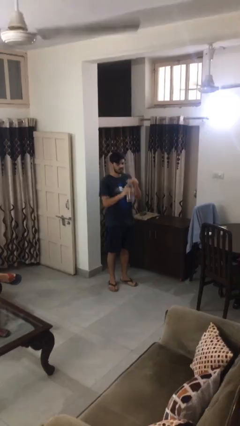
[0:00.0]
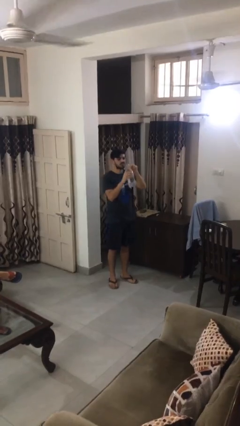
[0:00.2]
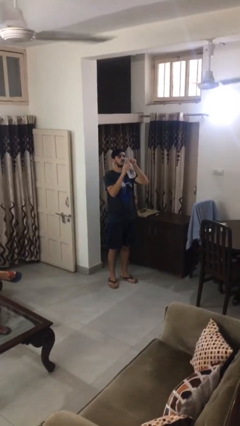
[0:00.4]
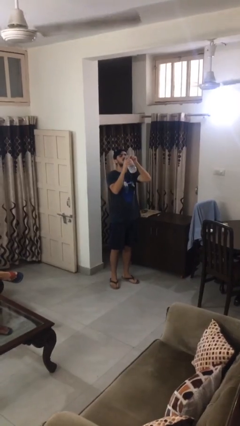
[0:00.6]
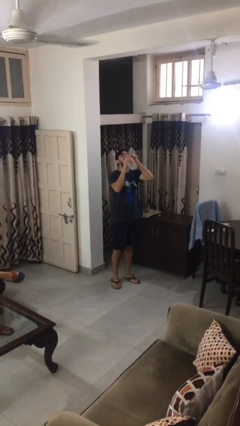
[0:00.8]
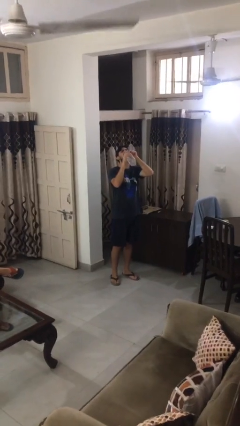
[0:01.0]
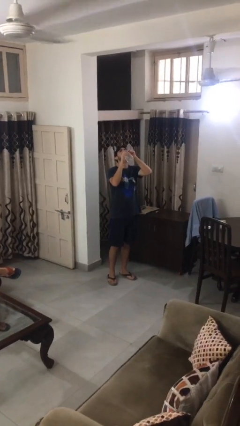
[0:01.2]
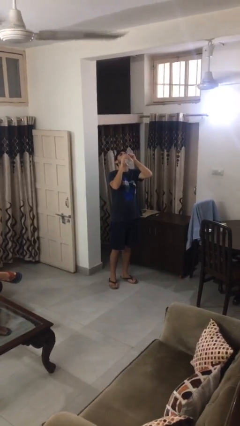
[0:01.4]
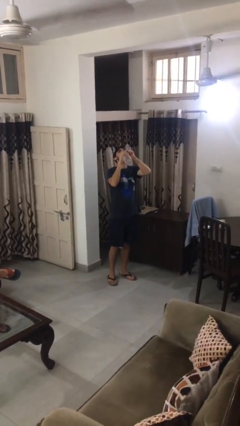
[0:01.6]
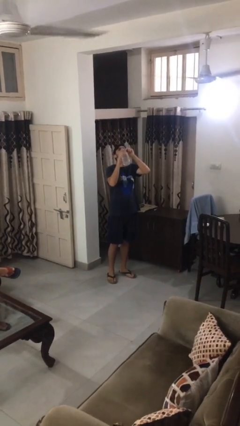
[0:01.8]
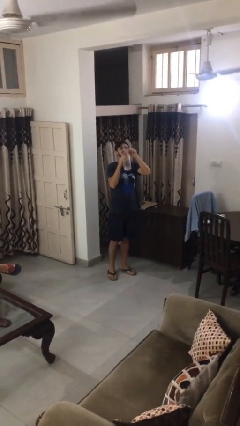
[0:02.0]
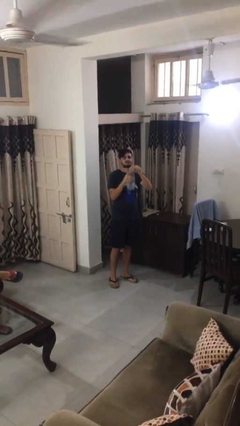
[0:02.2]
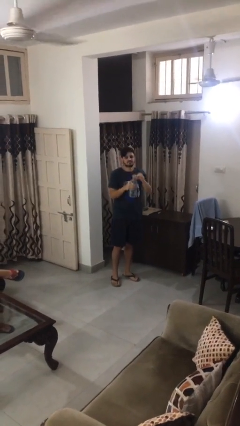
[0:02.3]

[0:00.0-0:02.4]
person drinks from bottle

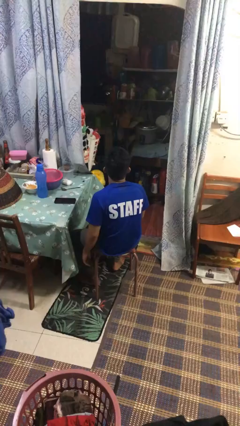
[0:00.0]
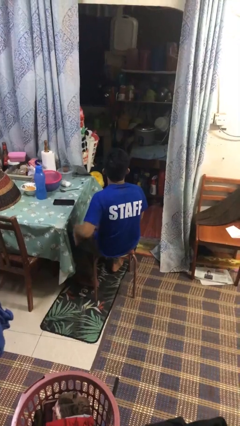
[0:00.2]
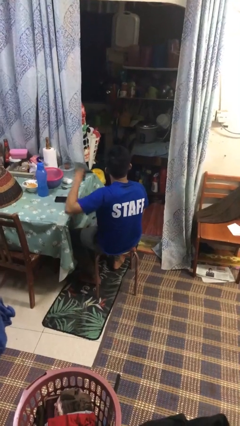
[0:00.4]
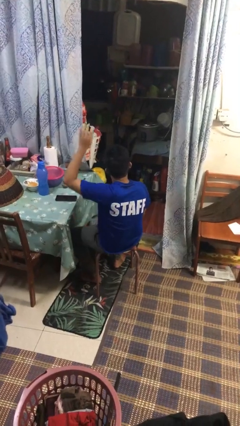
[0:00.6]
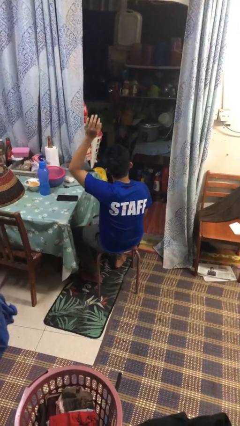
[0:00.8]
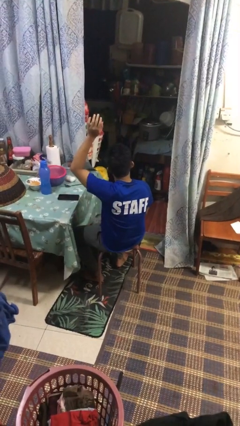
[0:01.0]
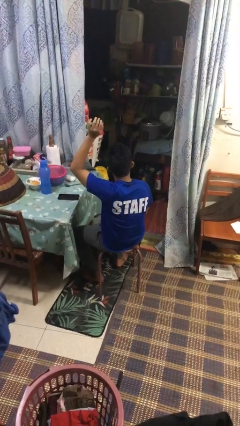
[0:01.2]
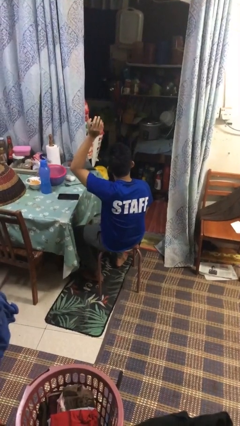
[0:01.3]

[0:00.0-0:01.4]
person gestures raise hand

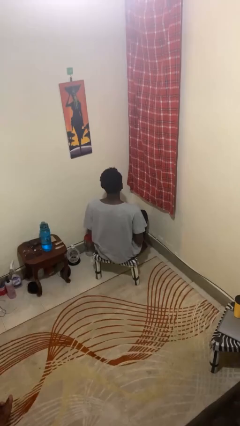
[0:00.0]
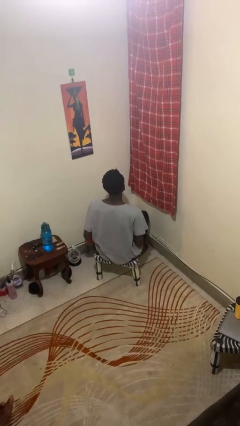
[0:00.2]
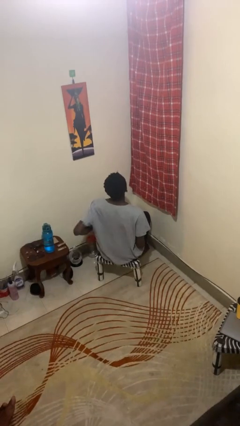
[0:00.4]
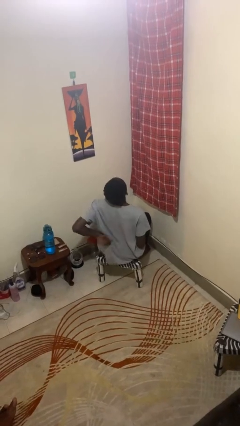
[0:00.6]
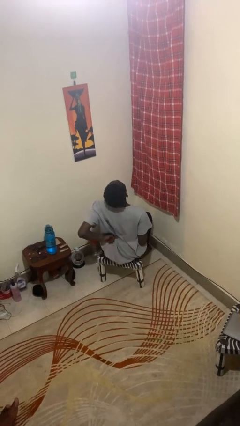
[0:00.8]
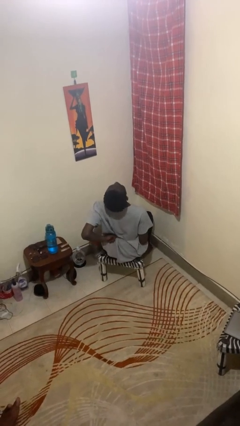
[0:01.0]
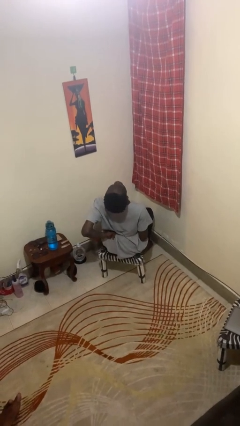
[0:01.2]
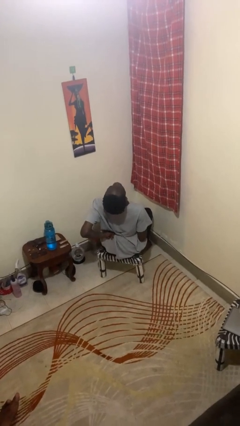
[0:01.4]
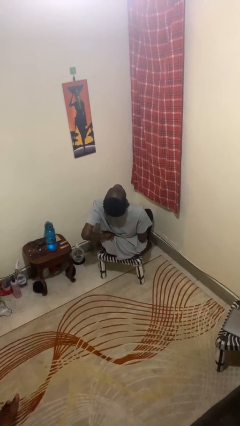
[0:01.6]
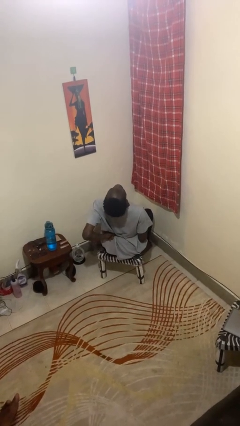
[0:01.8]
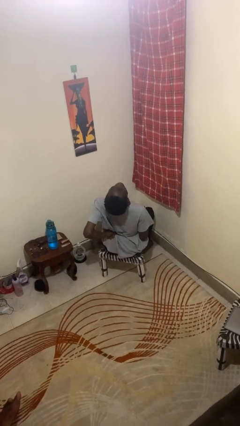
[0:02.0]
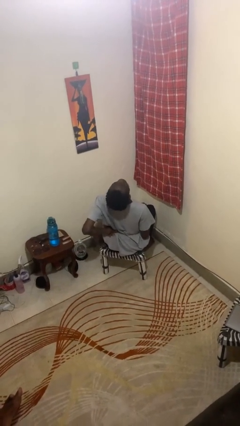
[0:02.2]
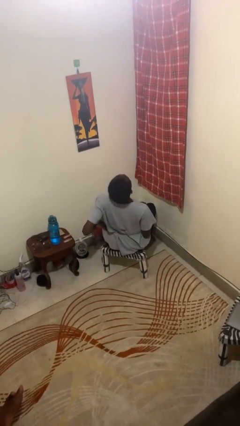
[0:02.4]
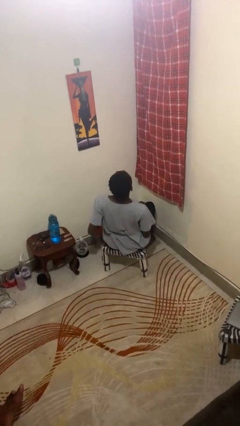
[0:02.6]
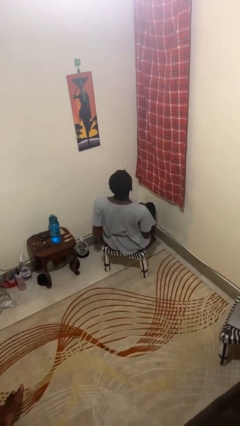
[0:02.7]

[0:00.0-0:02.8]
person stretches back

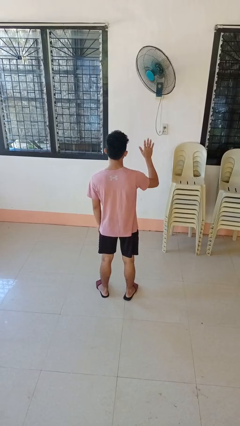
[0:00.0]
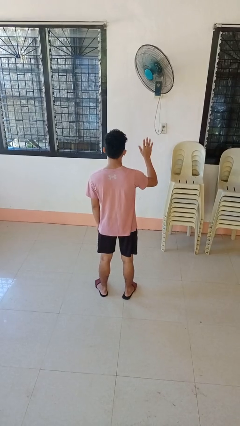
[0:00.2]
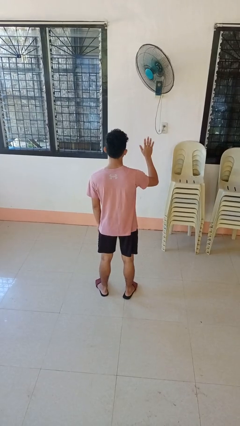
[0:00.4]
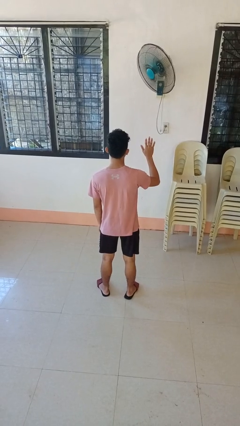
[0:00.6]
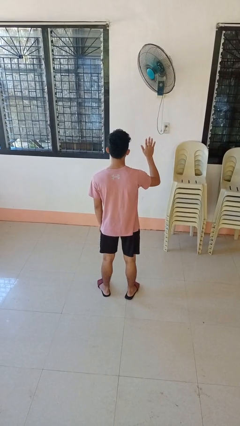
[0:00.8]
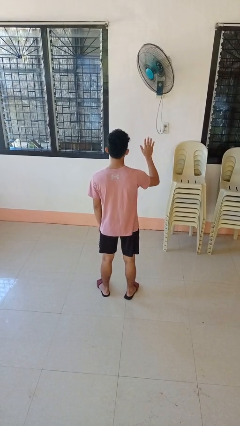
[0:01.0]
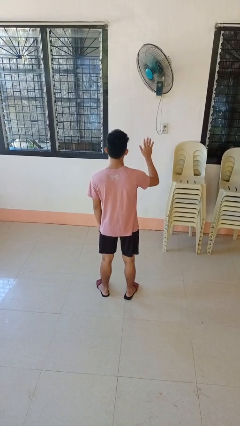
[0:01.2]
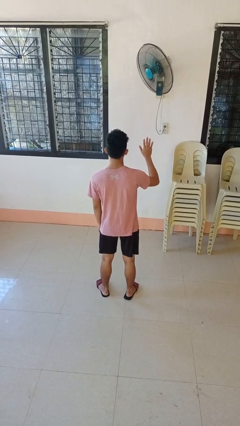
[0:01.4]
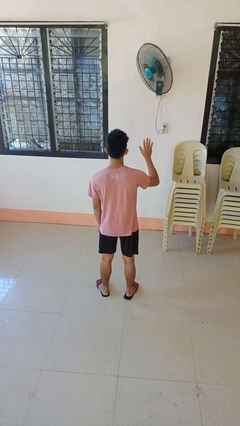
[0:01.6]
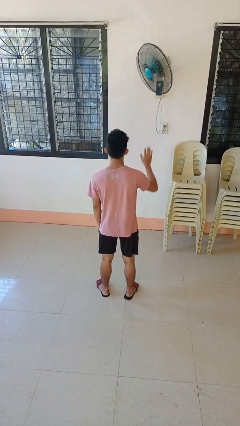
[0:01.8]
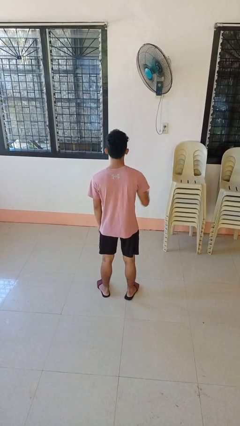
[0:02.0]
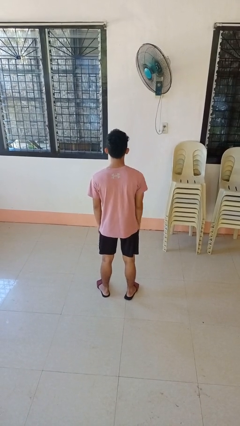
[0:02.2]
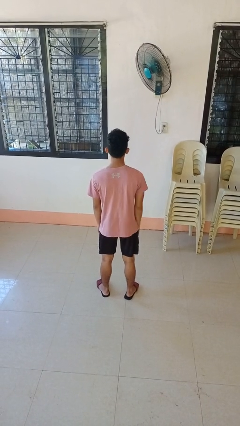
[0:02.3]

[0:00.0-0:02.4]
person gestures number five

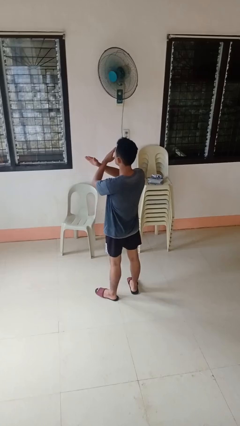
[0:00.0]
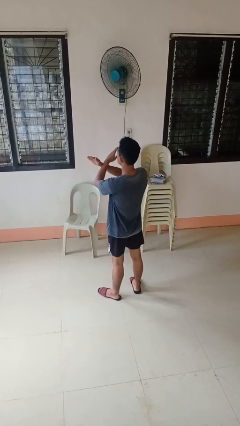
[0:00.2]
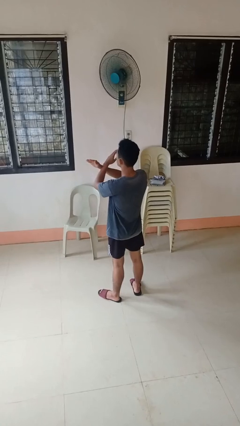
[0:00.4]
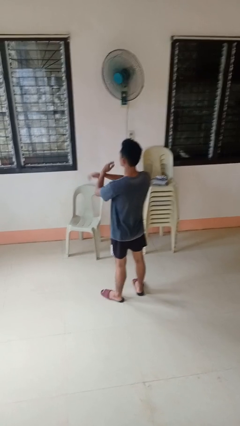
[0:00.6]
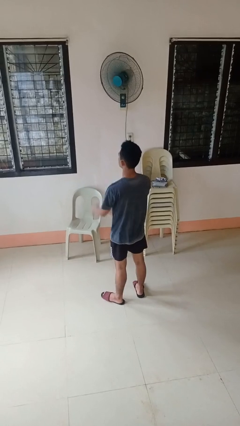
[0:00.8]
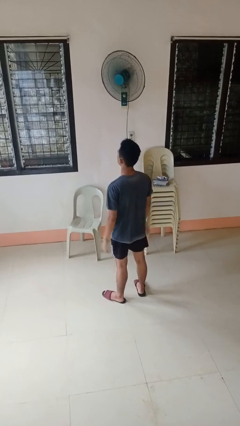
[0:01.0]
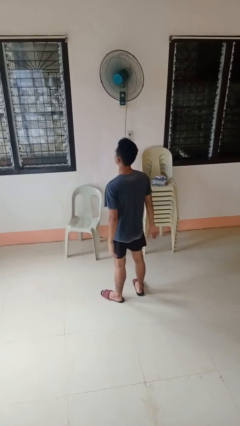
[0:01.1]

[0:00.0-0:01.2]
person gestures arms x

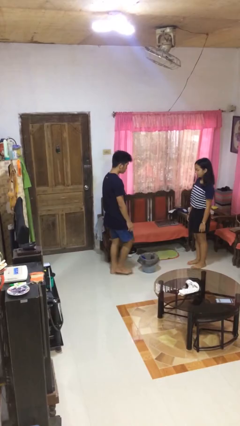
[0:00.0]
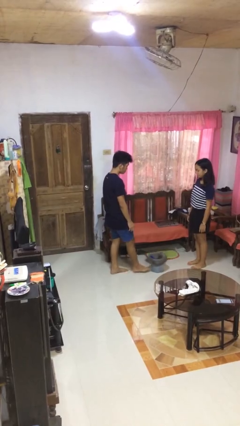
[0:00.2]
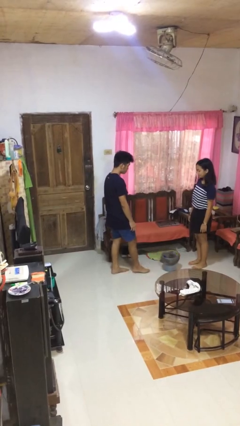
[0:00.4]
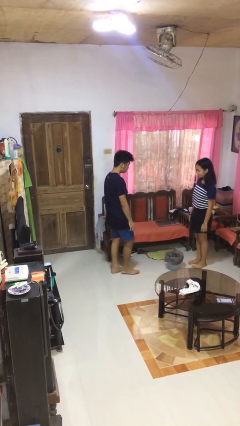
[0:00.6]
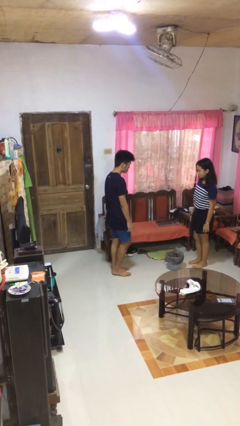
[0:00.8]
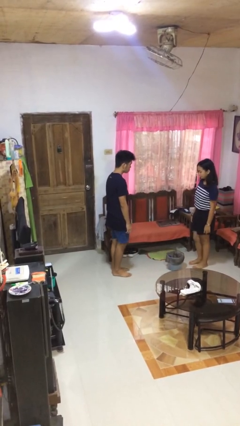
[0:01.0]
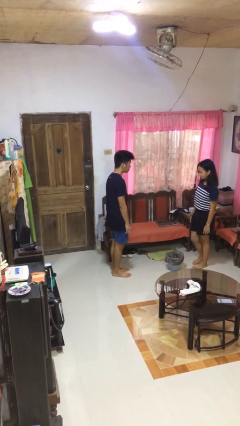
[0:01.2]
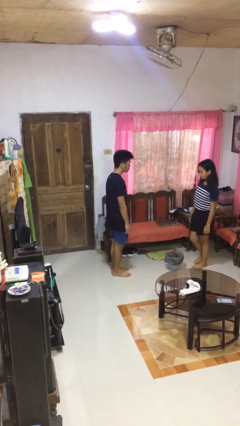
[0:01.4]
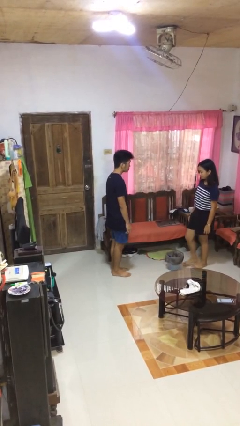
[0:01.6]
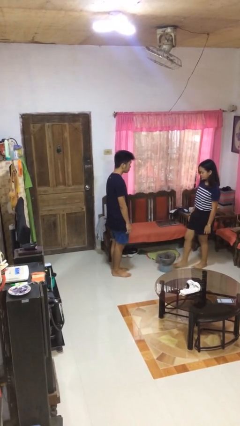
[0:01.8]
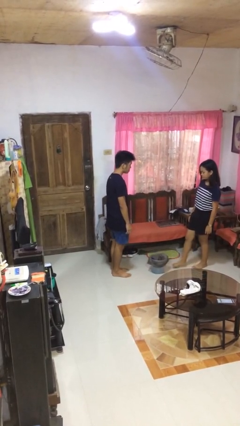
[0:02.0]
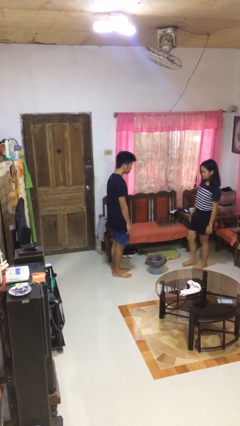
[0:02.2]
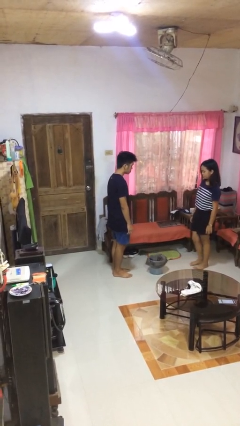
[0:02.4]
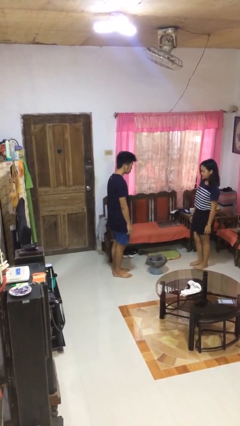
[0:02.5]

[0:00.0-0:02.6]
person kicks object to person

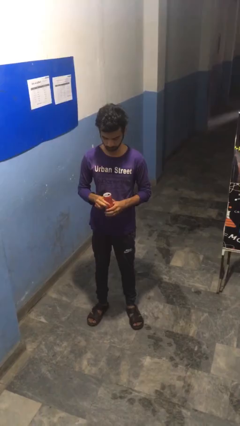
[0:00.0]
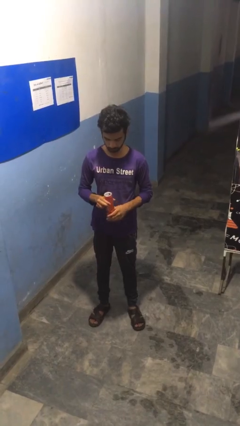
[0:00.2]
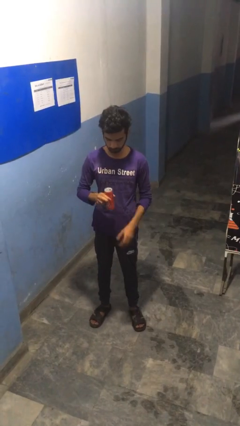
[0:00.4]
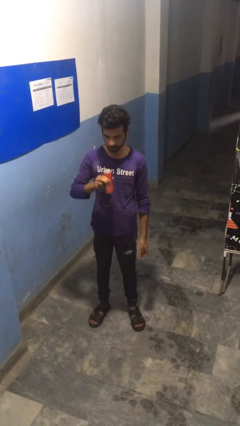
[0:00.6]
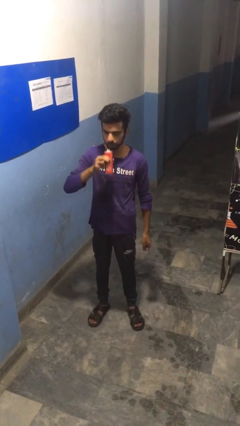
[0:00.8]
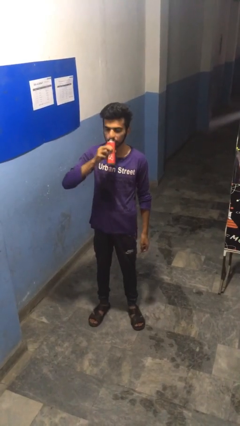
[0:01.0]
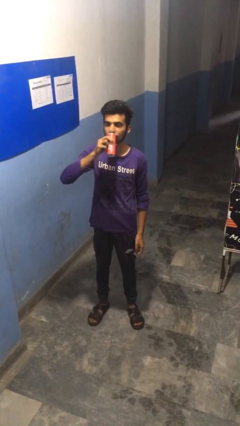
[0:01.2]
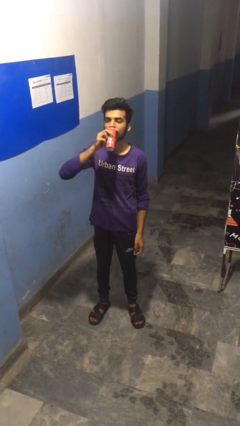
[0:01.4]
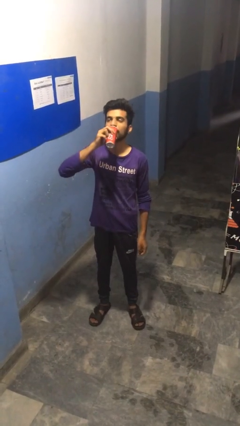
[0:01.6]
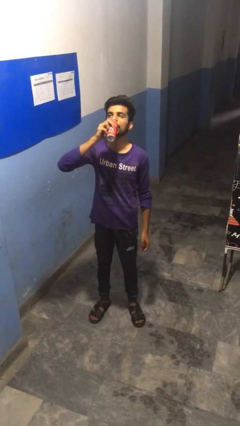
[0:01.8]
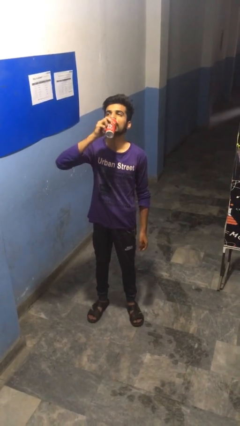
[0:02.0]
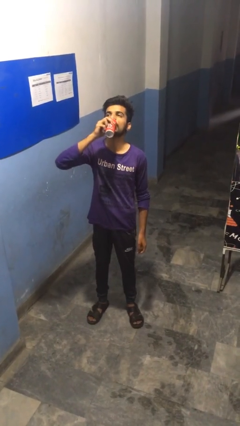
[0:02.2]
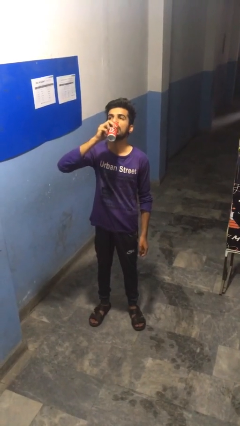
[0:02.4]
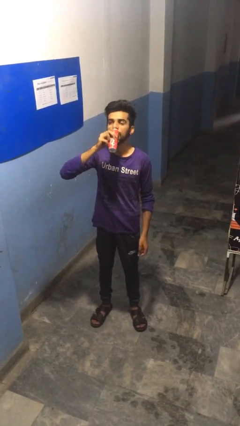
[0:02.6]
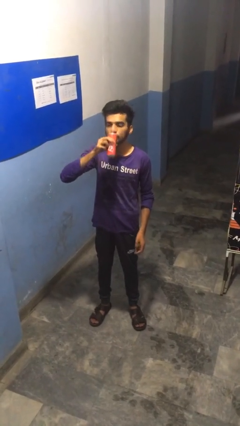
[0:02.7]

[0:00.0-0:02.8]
person drinks from beverage can

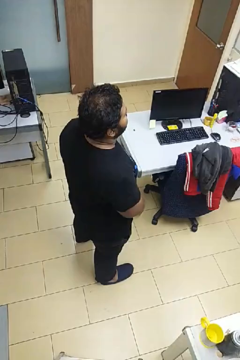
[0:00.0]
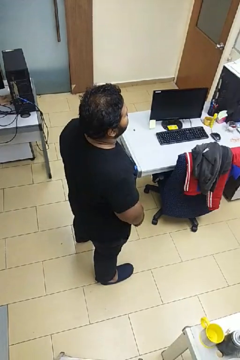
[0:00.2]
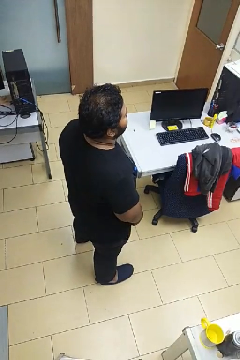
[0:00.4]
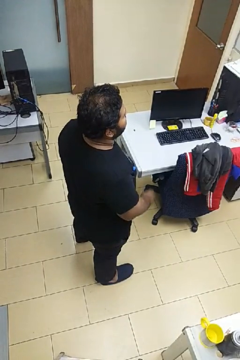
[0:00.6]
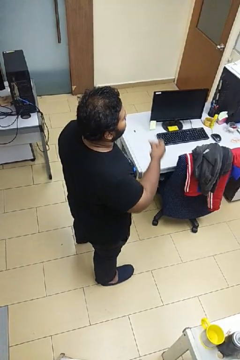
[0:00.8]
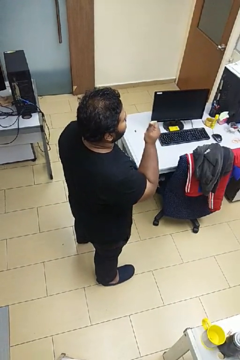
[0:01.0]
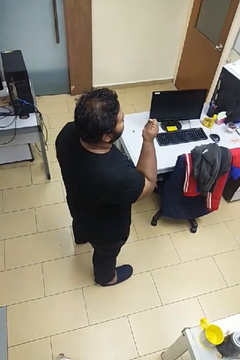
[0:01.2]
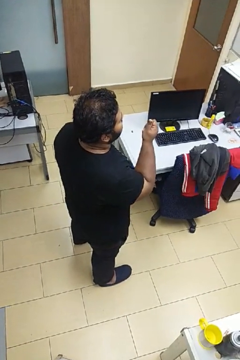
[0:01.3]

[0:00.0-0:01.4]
person snaps fingers

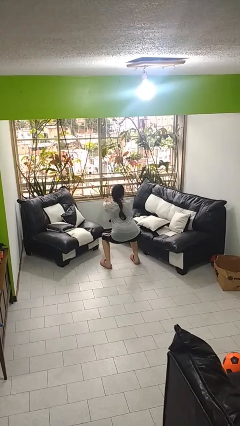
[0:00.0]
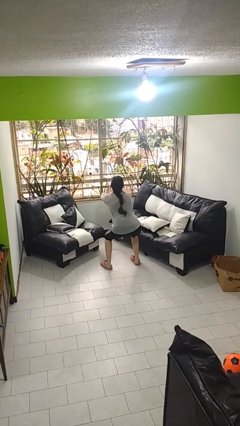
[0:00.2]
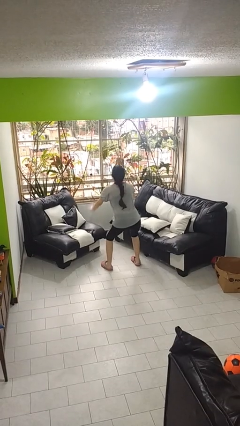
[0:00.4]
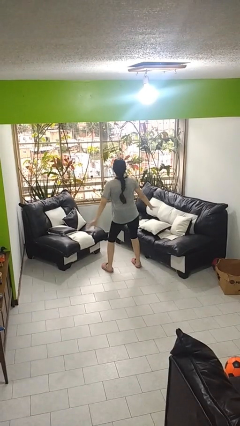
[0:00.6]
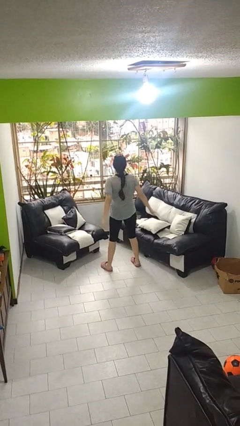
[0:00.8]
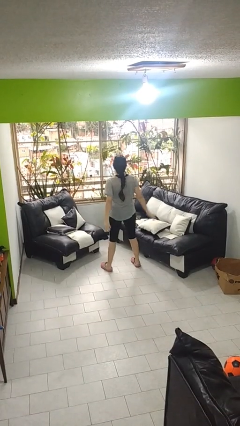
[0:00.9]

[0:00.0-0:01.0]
person stands up
